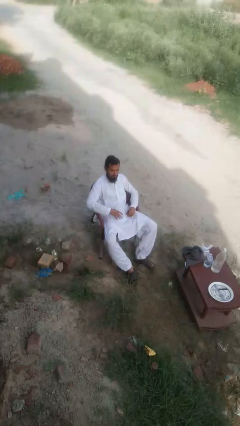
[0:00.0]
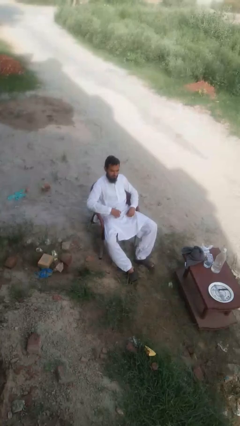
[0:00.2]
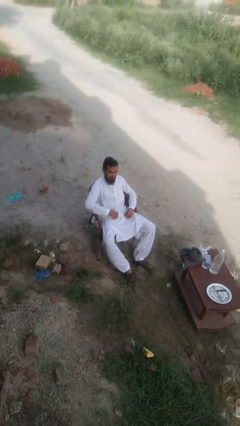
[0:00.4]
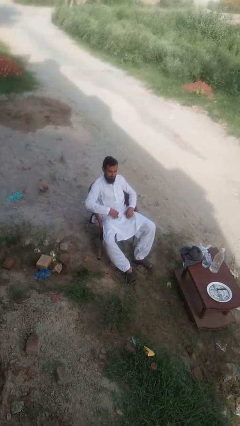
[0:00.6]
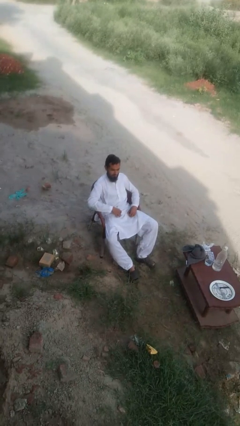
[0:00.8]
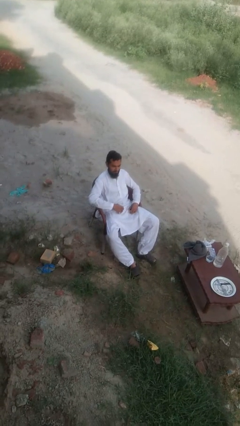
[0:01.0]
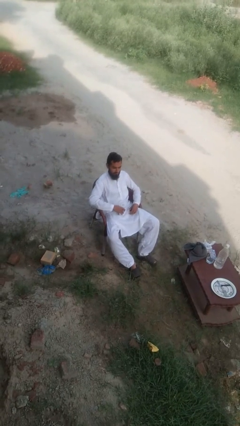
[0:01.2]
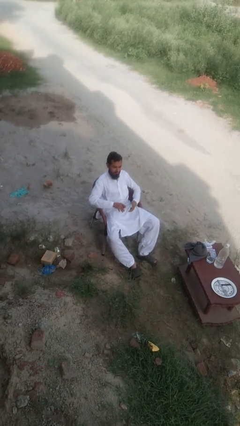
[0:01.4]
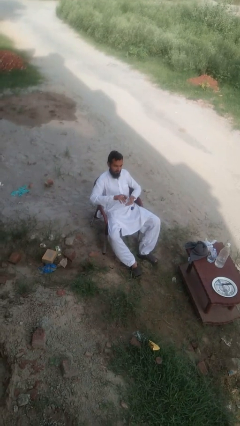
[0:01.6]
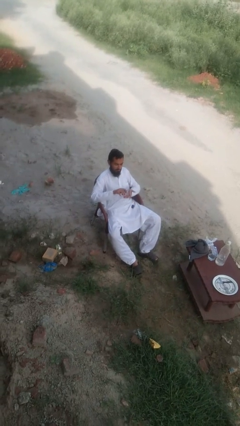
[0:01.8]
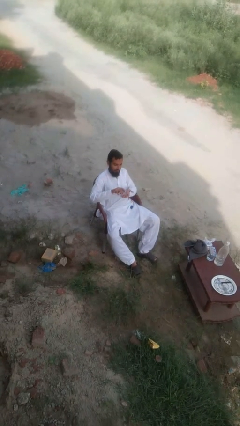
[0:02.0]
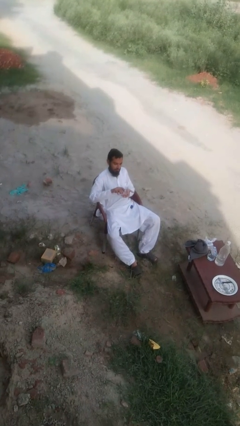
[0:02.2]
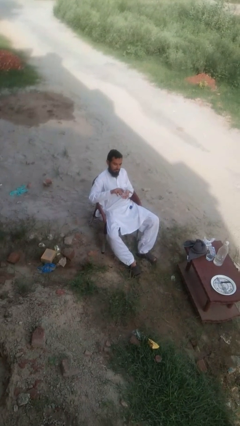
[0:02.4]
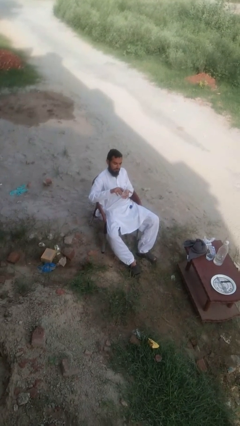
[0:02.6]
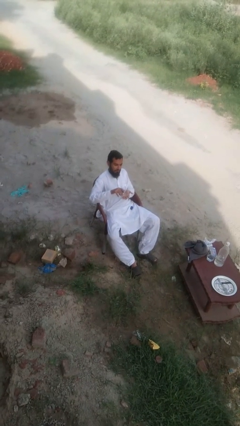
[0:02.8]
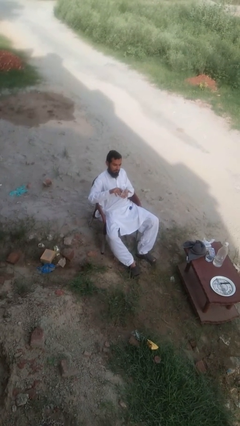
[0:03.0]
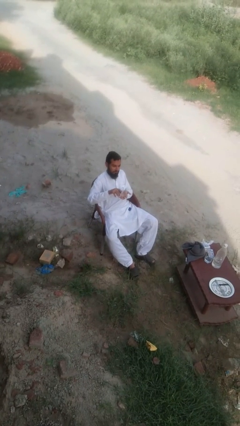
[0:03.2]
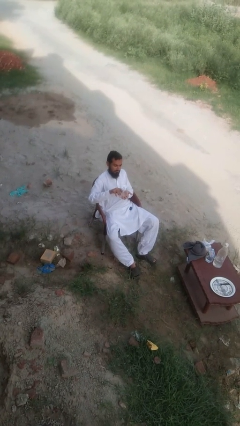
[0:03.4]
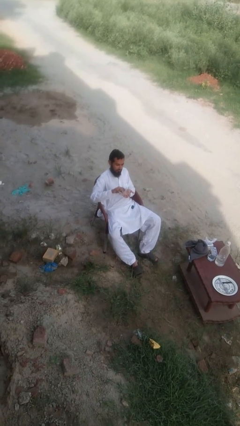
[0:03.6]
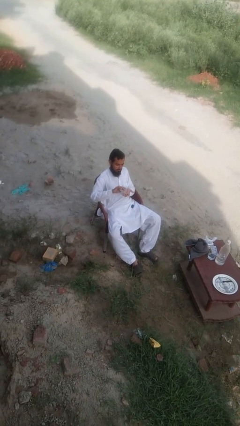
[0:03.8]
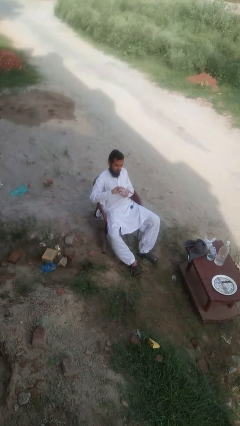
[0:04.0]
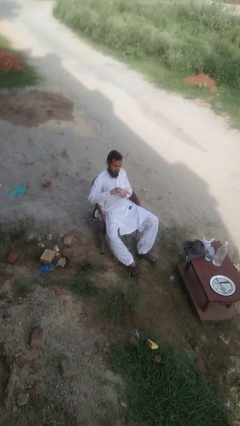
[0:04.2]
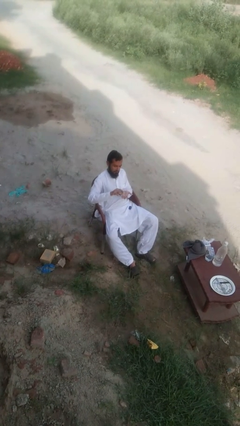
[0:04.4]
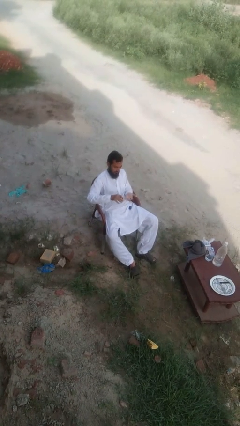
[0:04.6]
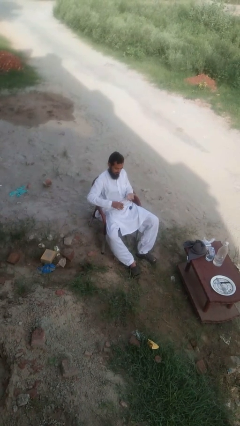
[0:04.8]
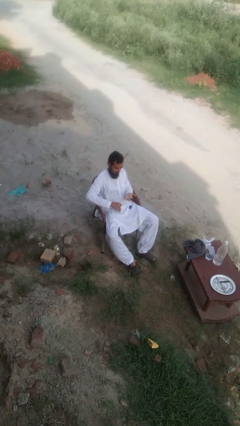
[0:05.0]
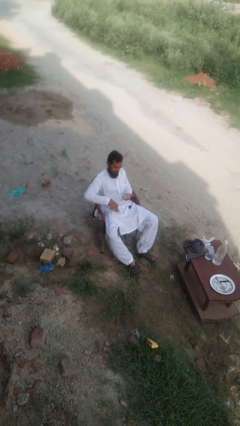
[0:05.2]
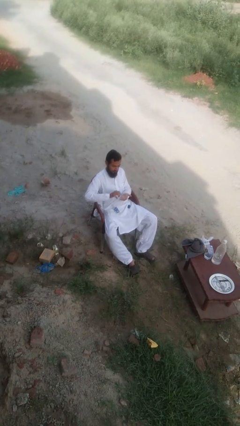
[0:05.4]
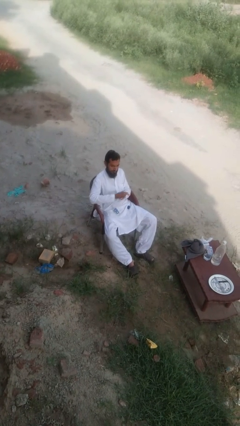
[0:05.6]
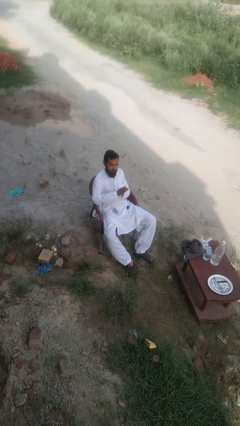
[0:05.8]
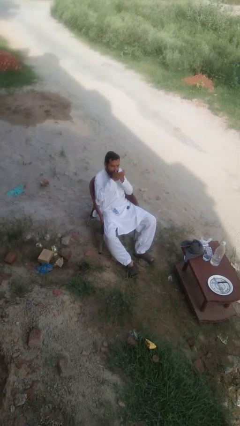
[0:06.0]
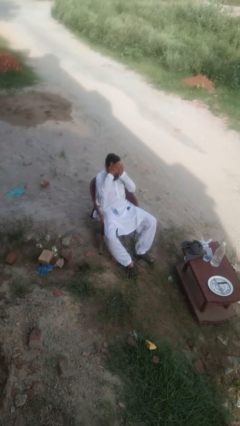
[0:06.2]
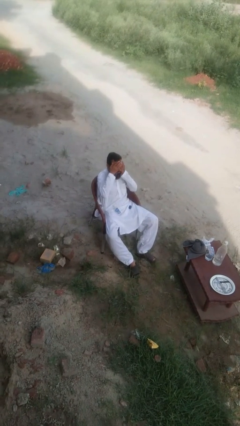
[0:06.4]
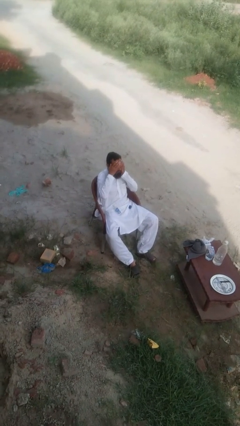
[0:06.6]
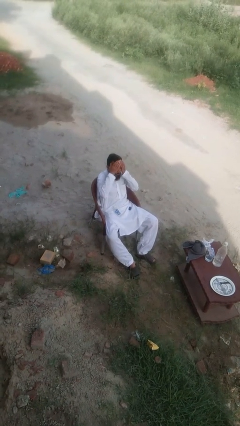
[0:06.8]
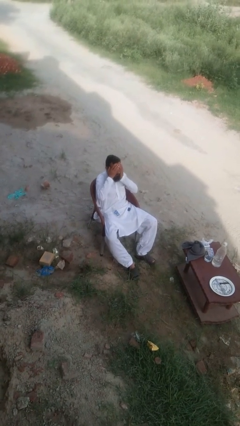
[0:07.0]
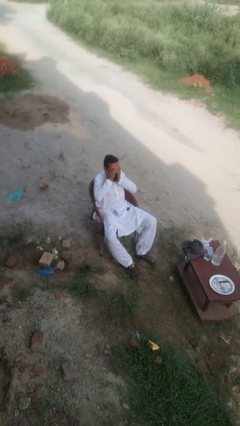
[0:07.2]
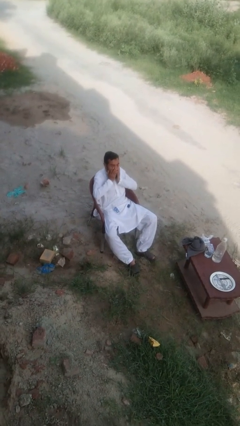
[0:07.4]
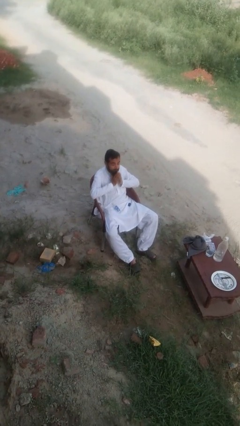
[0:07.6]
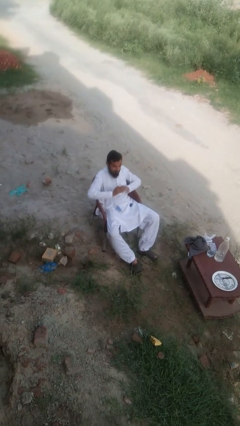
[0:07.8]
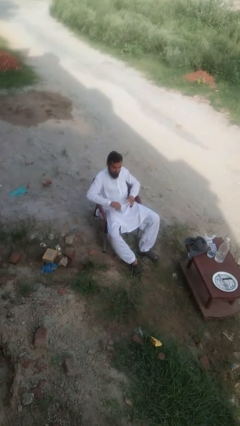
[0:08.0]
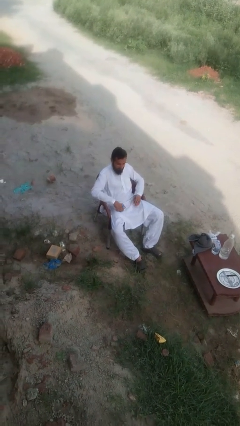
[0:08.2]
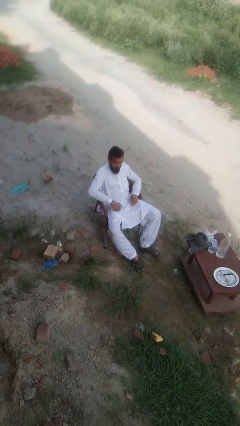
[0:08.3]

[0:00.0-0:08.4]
person applies facial moisturizer

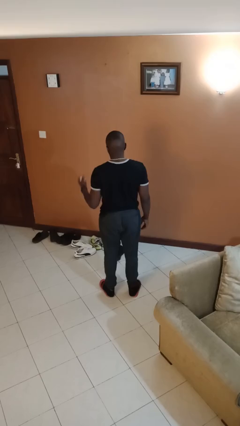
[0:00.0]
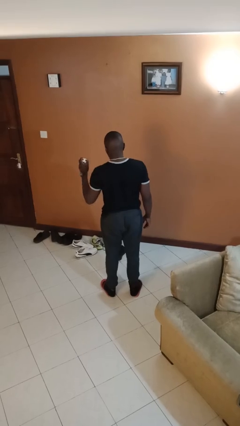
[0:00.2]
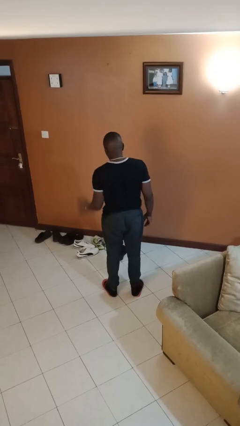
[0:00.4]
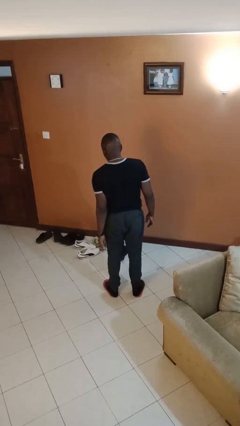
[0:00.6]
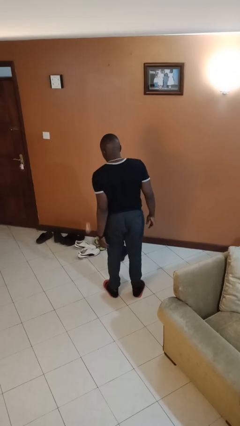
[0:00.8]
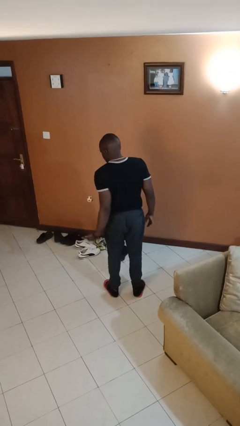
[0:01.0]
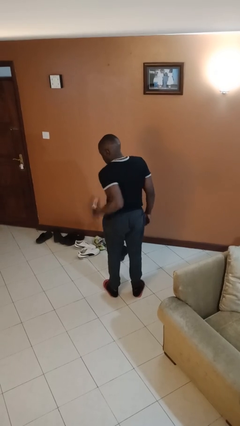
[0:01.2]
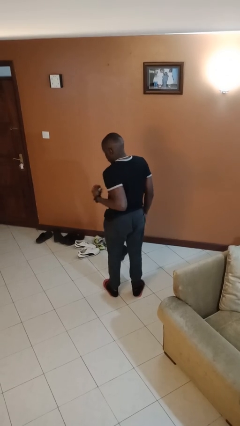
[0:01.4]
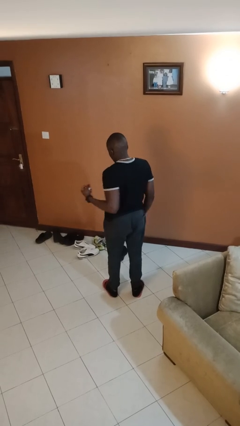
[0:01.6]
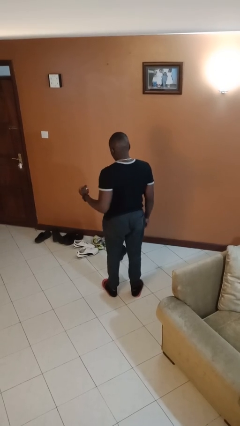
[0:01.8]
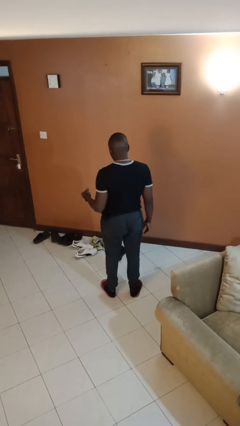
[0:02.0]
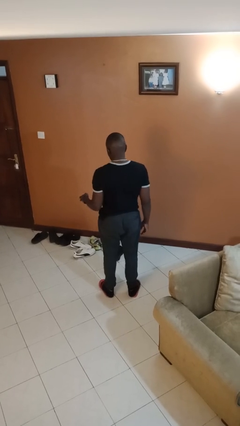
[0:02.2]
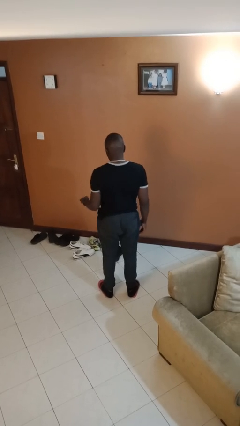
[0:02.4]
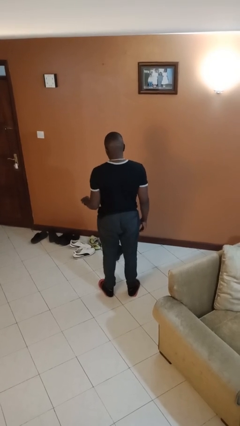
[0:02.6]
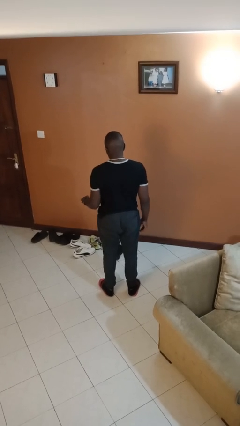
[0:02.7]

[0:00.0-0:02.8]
person bounces ball on floor

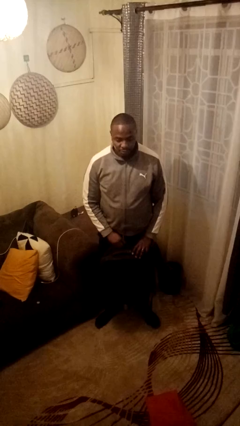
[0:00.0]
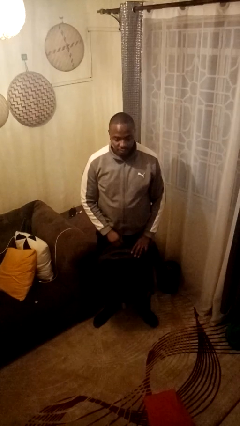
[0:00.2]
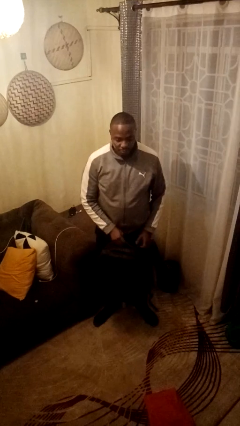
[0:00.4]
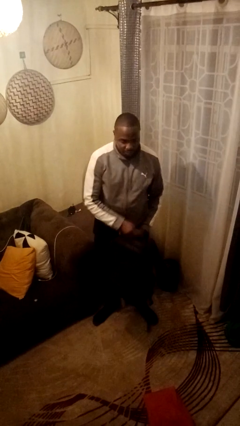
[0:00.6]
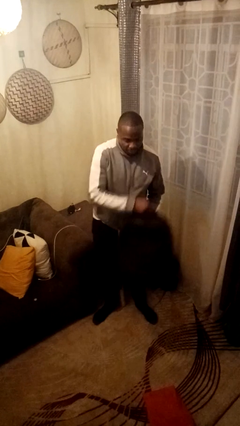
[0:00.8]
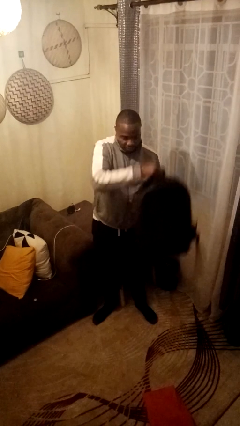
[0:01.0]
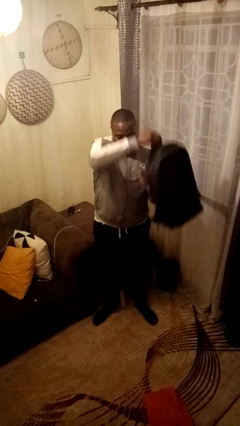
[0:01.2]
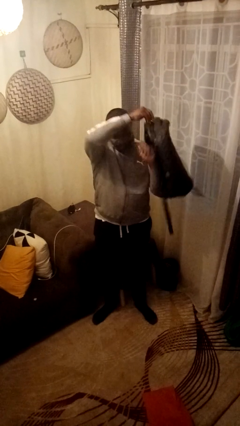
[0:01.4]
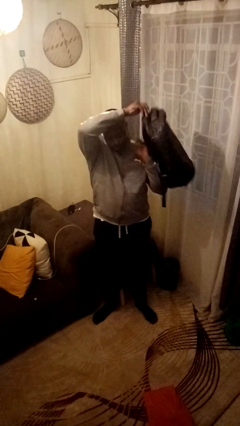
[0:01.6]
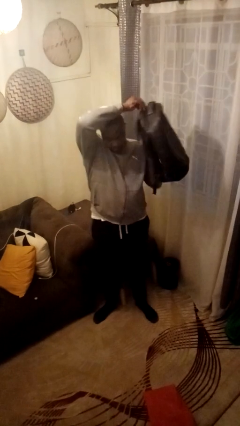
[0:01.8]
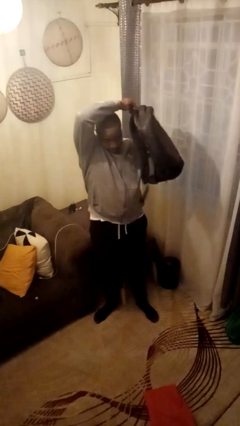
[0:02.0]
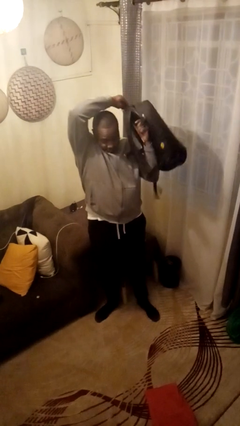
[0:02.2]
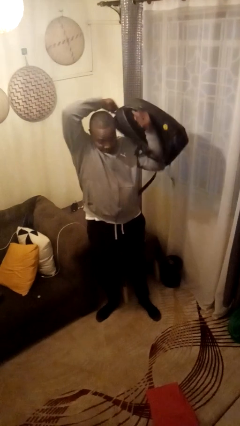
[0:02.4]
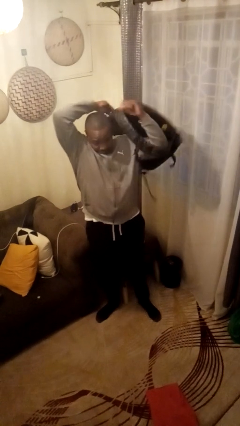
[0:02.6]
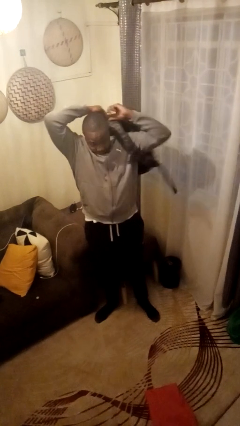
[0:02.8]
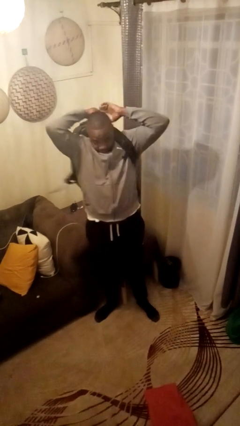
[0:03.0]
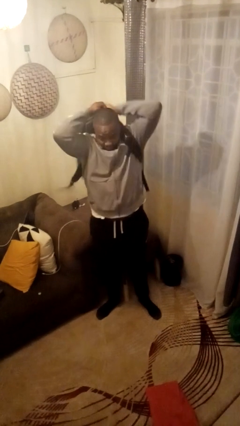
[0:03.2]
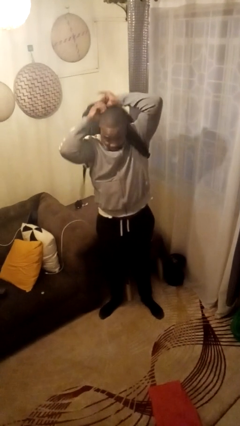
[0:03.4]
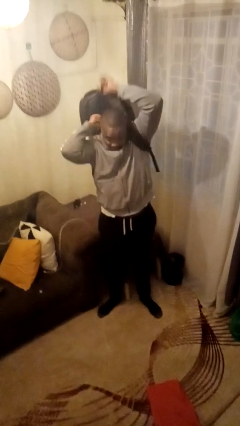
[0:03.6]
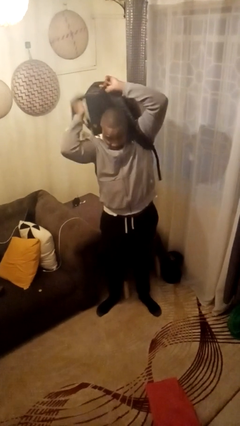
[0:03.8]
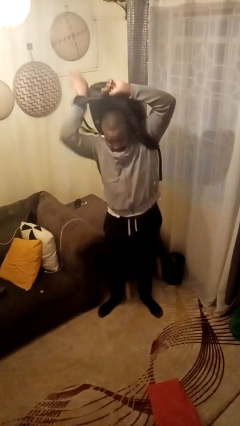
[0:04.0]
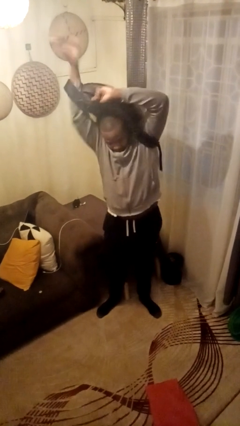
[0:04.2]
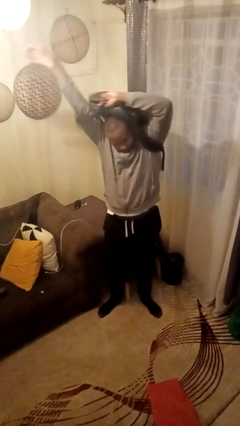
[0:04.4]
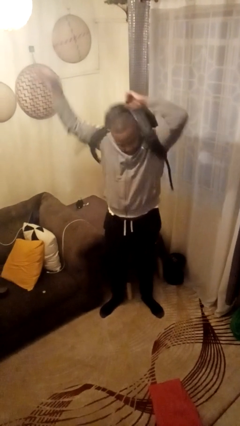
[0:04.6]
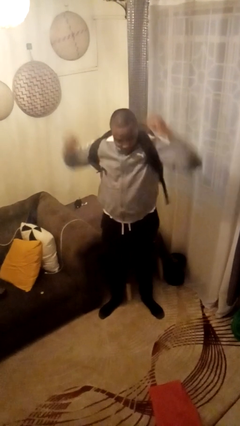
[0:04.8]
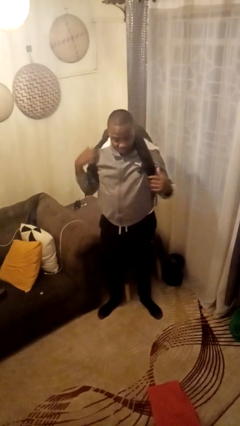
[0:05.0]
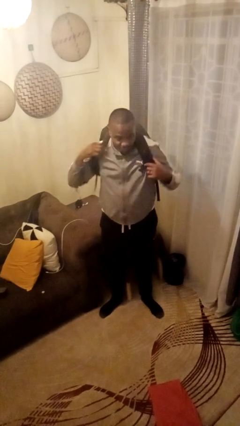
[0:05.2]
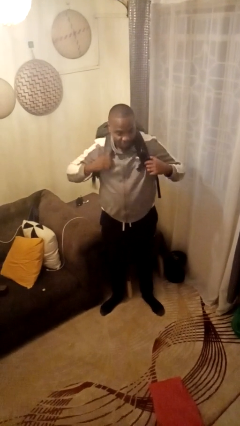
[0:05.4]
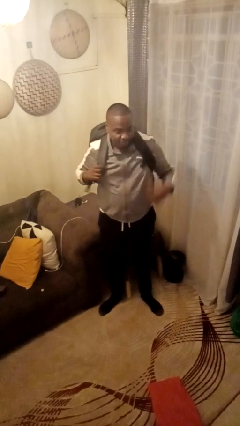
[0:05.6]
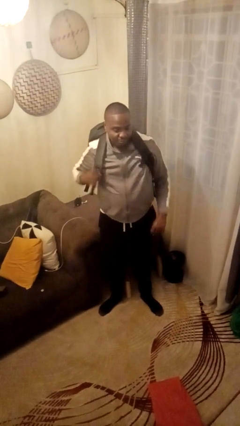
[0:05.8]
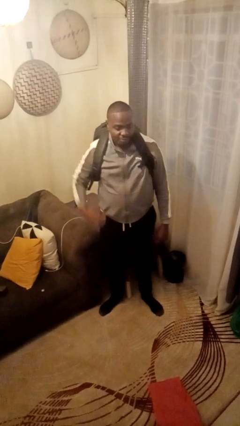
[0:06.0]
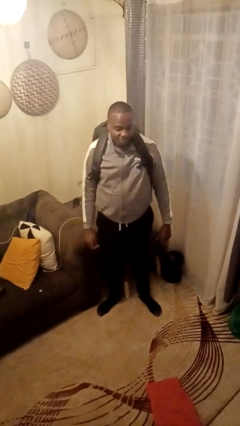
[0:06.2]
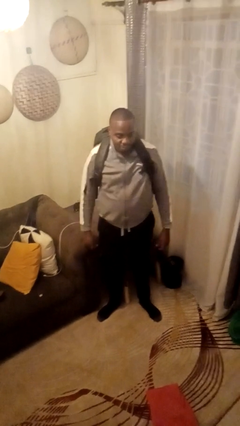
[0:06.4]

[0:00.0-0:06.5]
person puts on backpack

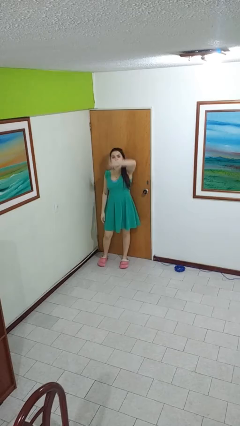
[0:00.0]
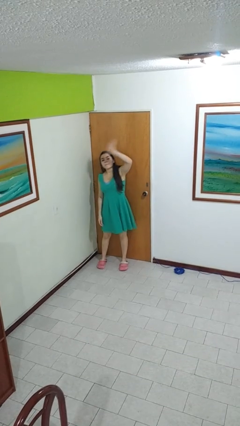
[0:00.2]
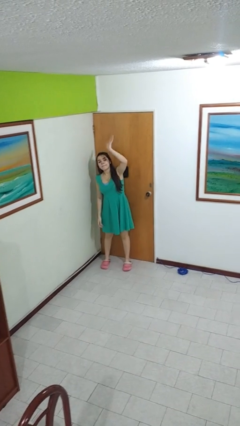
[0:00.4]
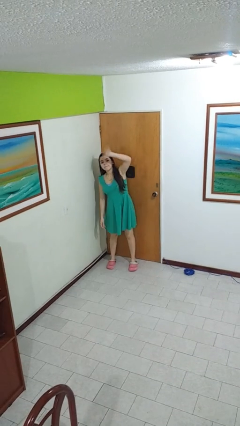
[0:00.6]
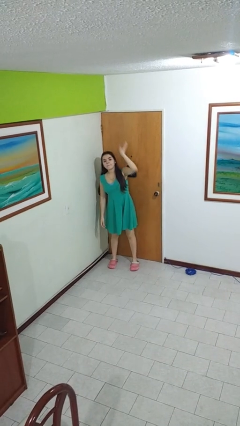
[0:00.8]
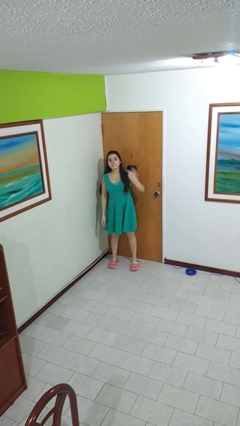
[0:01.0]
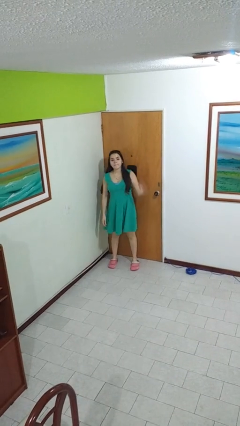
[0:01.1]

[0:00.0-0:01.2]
person waves at person
